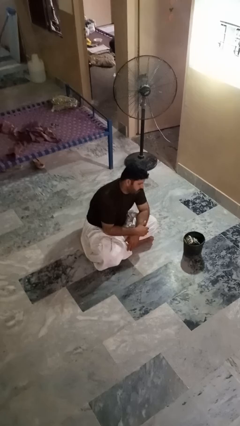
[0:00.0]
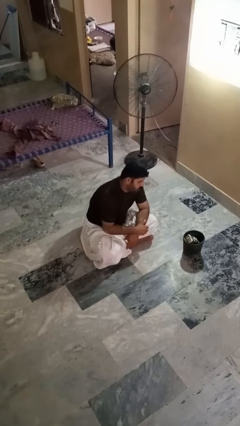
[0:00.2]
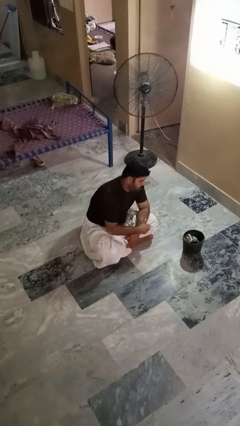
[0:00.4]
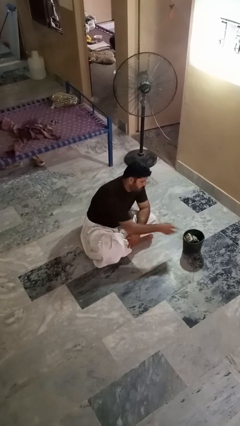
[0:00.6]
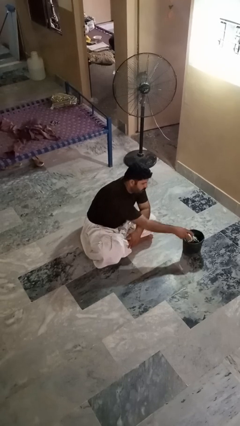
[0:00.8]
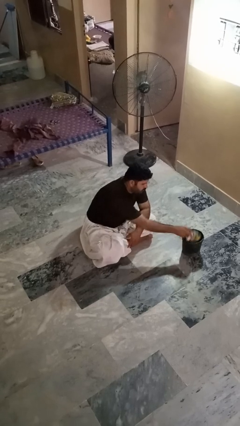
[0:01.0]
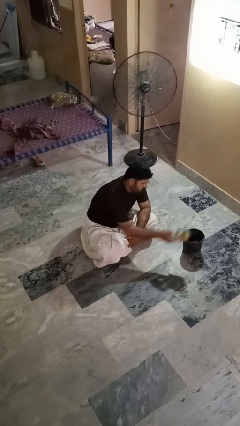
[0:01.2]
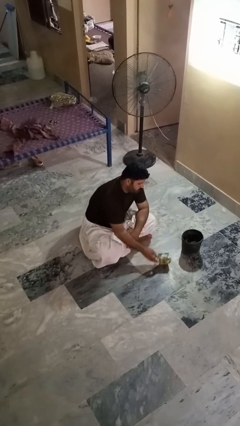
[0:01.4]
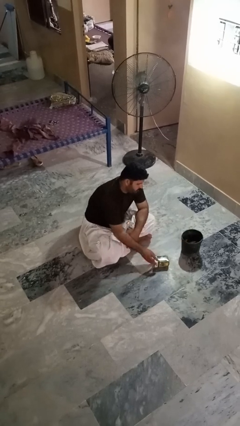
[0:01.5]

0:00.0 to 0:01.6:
person takes object from basket

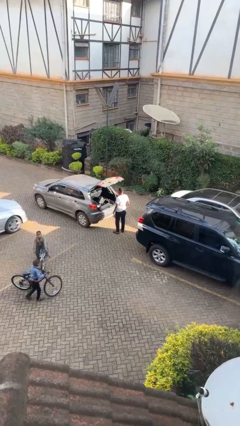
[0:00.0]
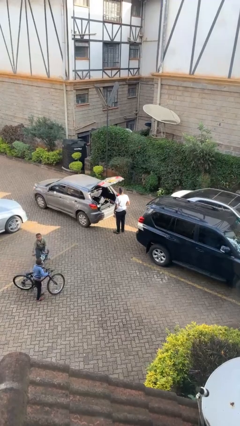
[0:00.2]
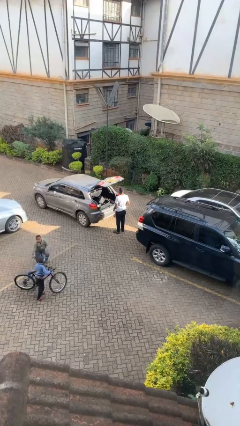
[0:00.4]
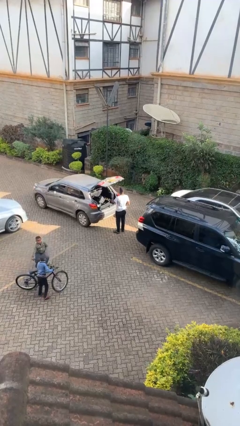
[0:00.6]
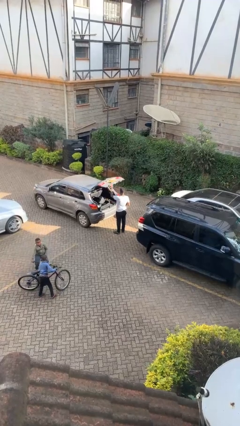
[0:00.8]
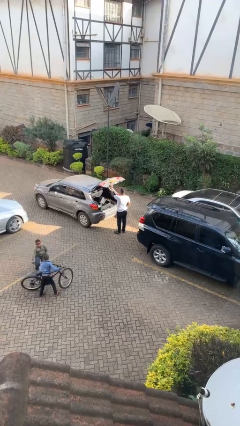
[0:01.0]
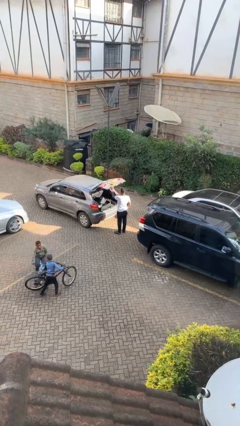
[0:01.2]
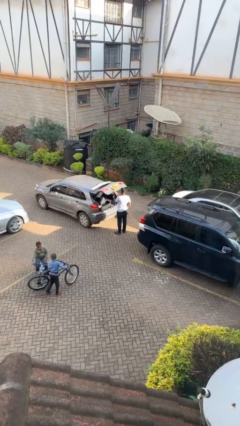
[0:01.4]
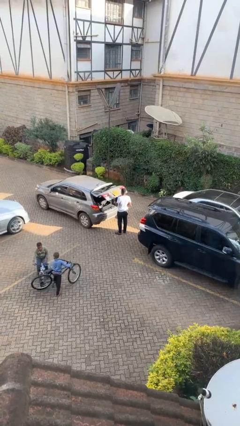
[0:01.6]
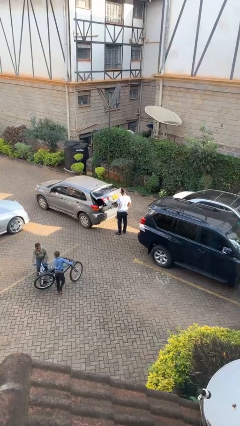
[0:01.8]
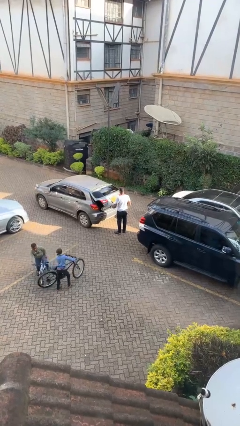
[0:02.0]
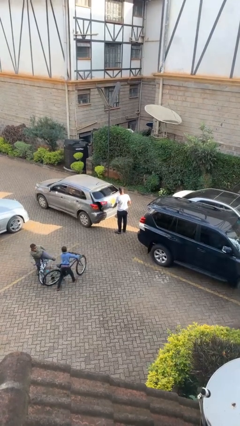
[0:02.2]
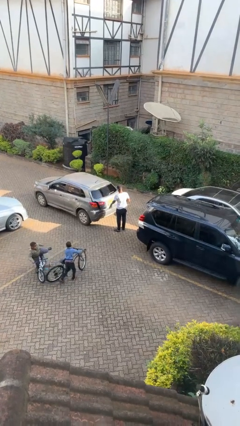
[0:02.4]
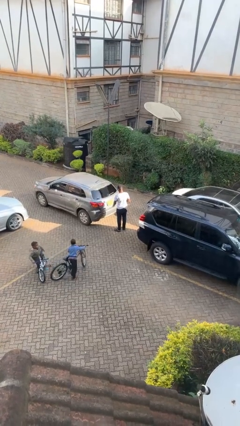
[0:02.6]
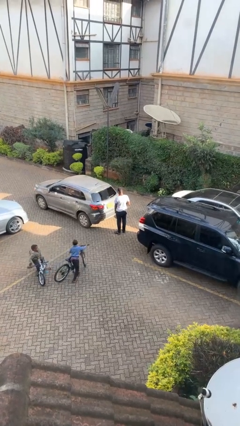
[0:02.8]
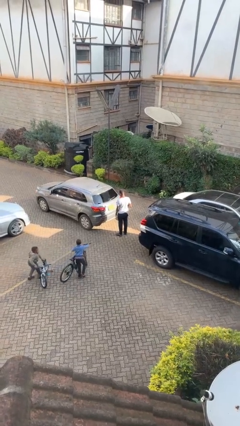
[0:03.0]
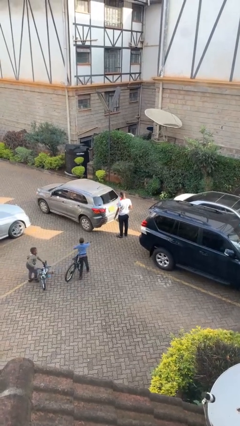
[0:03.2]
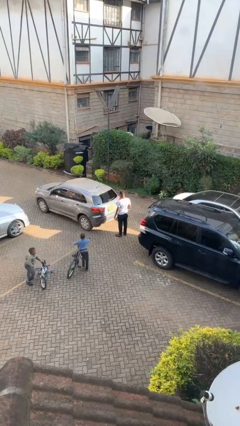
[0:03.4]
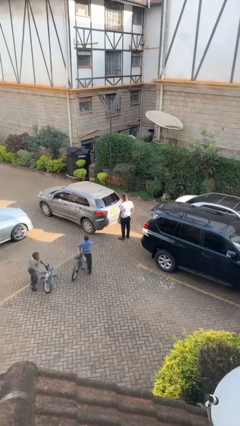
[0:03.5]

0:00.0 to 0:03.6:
person closes car trunk

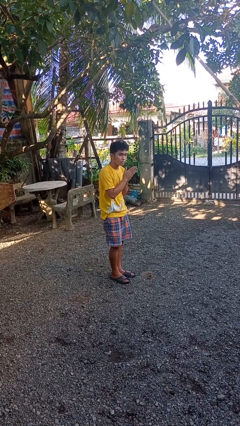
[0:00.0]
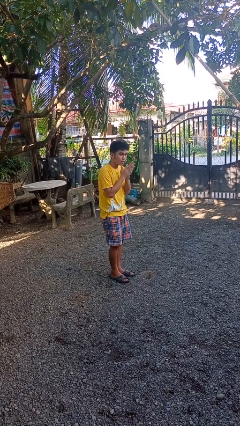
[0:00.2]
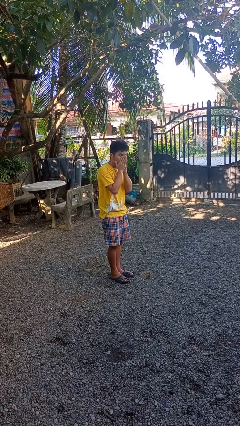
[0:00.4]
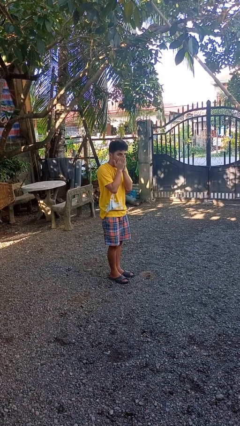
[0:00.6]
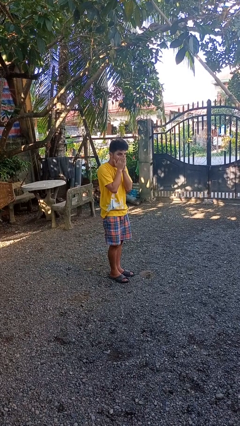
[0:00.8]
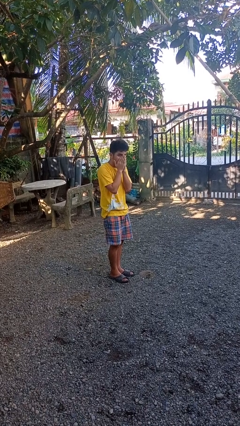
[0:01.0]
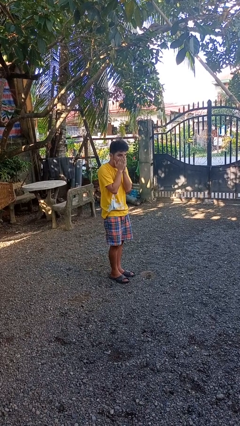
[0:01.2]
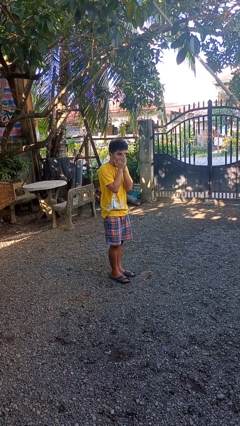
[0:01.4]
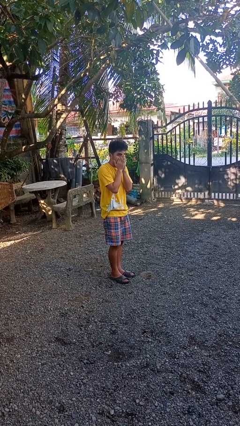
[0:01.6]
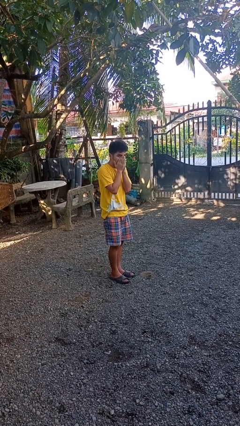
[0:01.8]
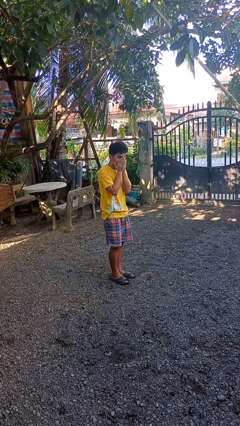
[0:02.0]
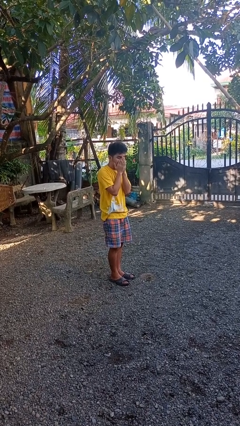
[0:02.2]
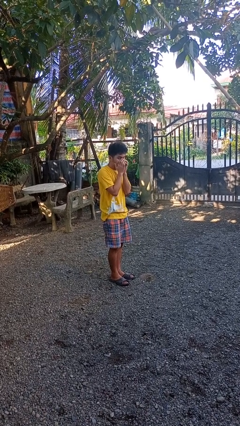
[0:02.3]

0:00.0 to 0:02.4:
person blows into hands

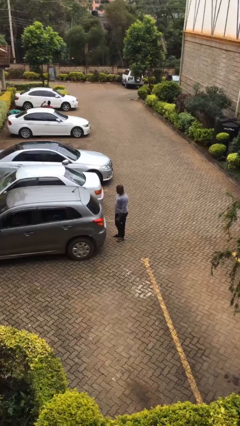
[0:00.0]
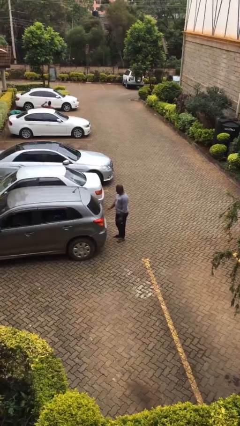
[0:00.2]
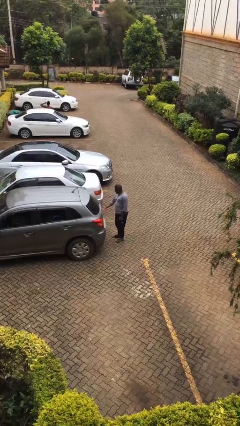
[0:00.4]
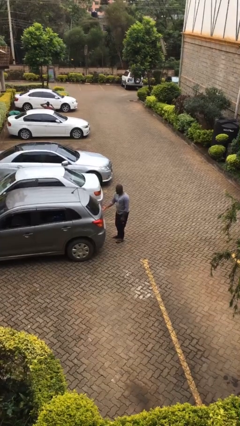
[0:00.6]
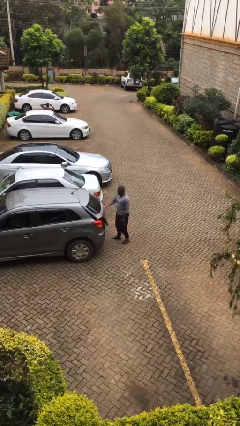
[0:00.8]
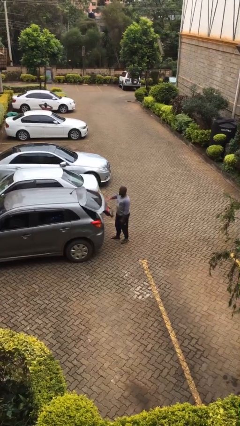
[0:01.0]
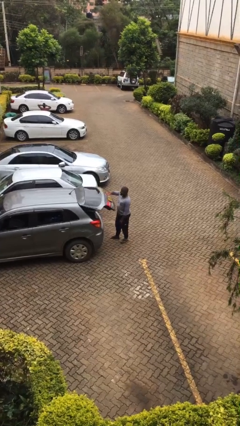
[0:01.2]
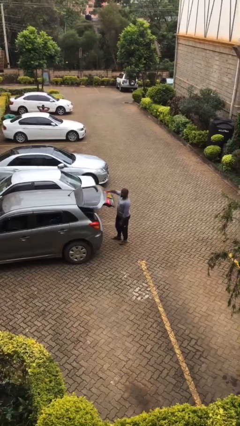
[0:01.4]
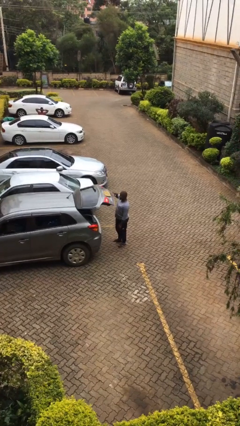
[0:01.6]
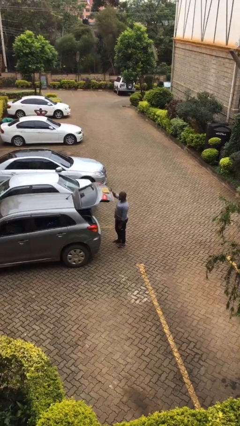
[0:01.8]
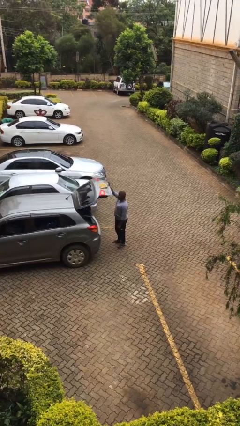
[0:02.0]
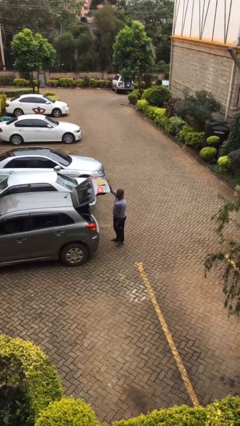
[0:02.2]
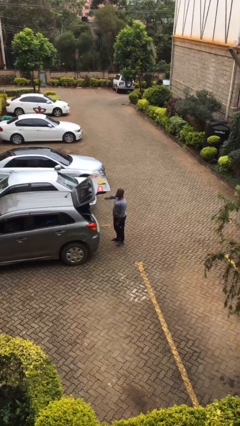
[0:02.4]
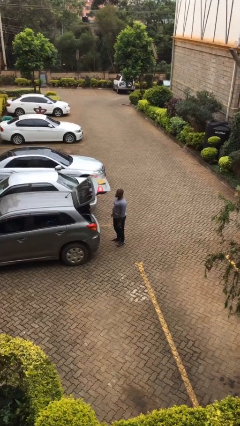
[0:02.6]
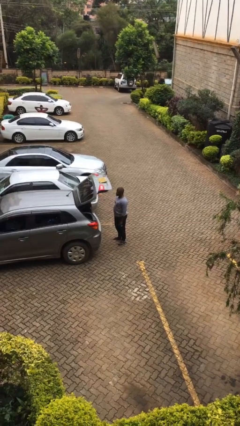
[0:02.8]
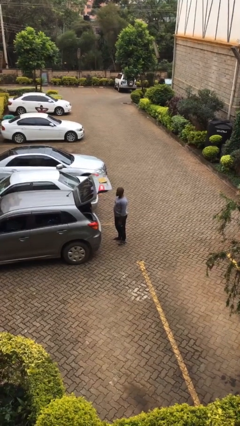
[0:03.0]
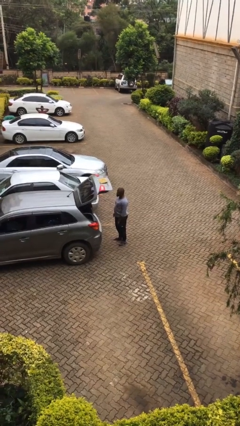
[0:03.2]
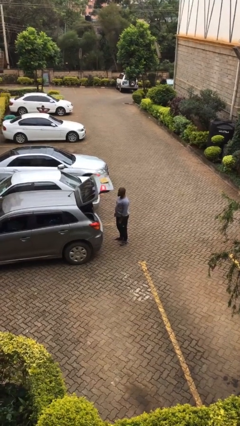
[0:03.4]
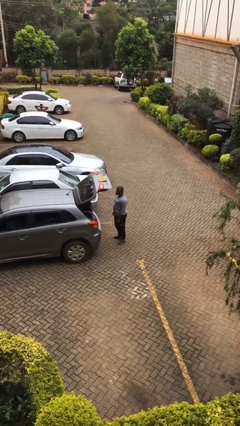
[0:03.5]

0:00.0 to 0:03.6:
person opens car trunk

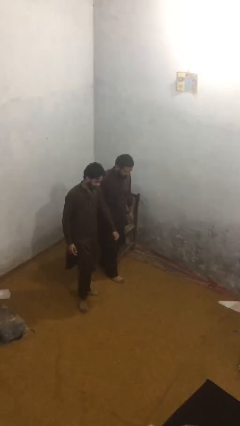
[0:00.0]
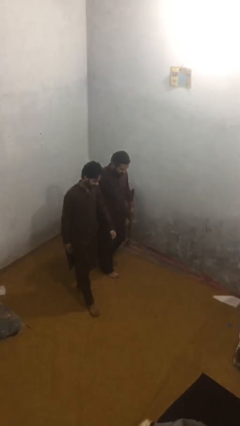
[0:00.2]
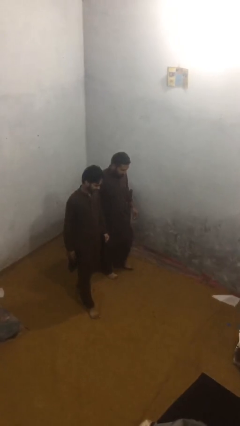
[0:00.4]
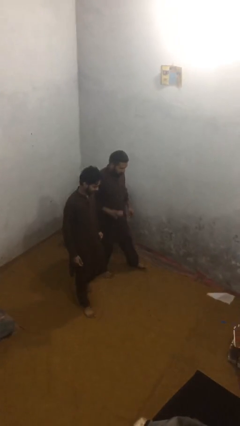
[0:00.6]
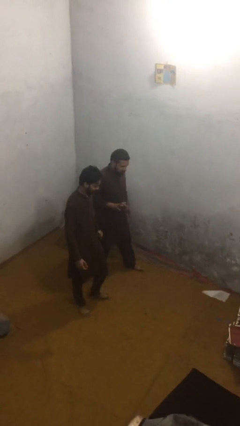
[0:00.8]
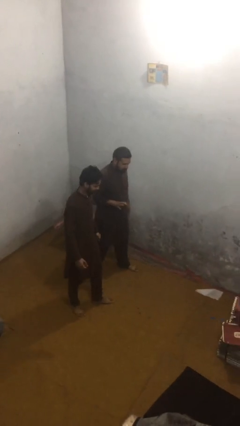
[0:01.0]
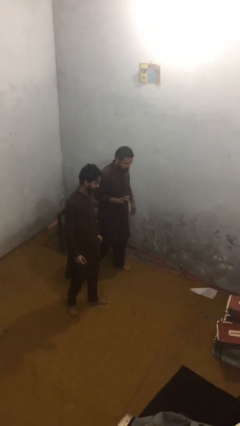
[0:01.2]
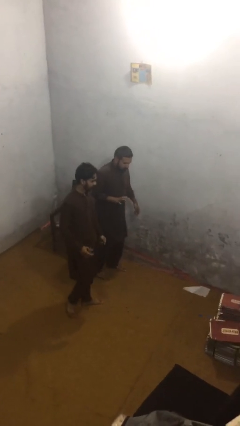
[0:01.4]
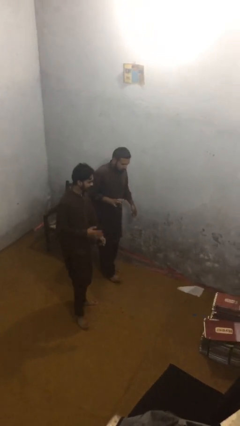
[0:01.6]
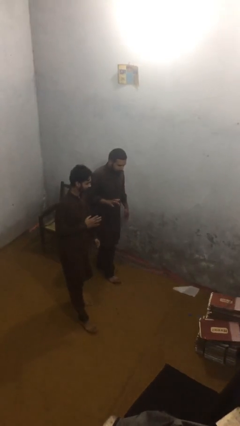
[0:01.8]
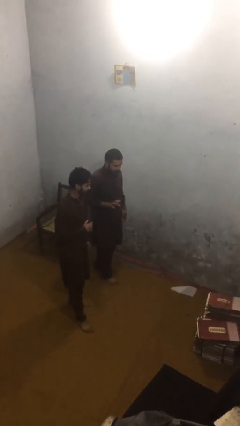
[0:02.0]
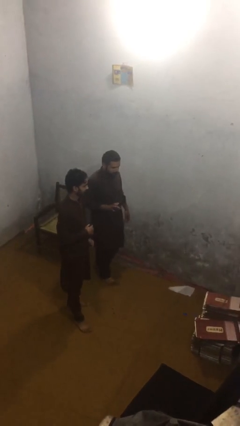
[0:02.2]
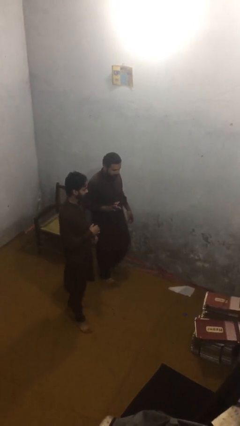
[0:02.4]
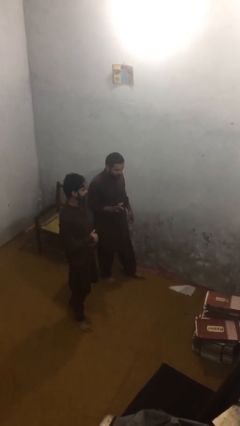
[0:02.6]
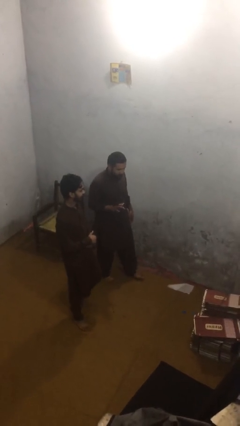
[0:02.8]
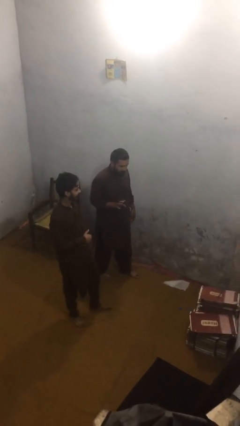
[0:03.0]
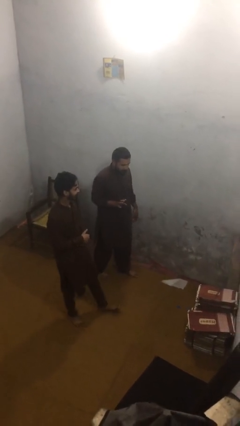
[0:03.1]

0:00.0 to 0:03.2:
person talks to person

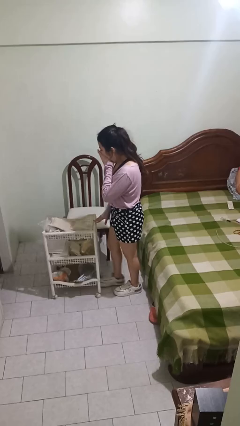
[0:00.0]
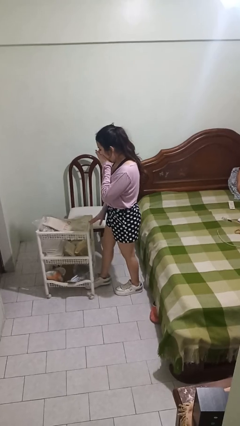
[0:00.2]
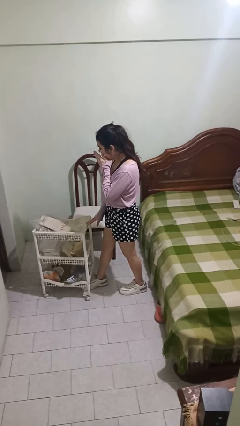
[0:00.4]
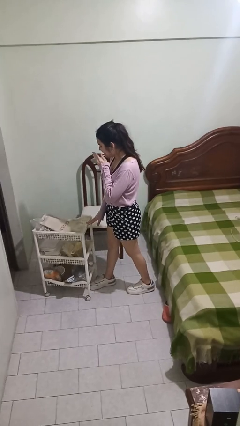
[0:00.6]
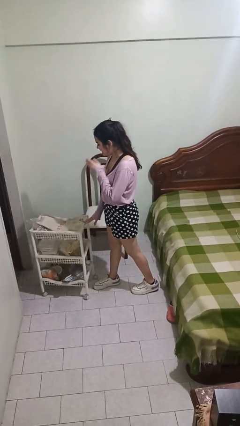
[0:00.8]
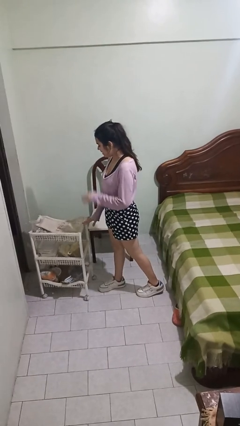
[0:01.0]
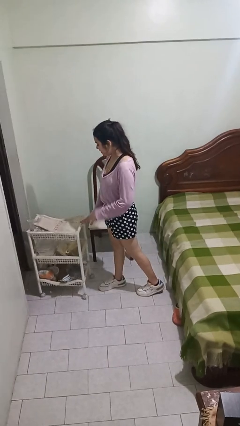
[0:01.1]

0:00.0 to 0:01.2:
person pushes wheeled cart

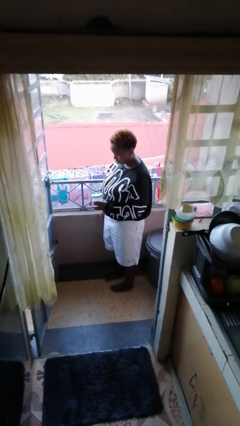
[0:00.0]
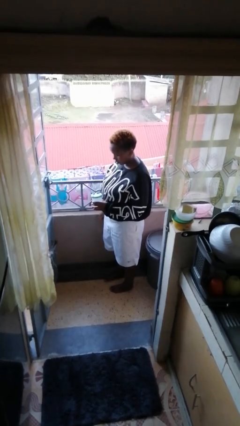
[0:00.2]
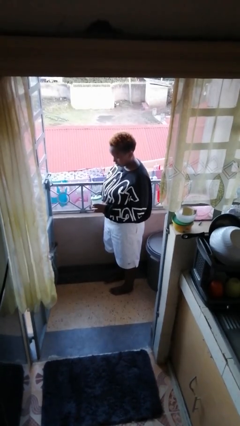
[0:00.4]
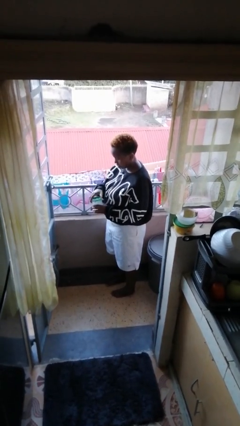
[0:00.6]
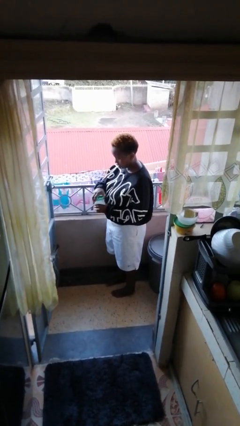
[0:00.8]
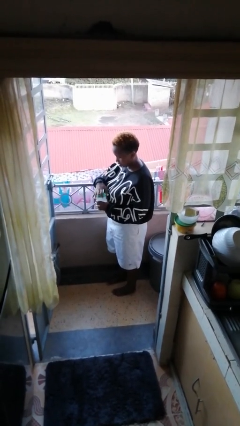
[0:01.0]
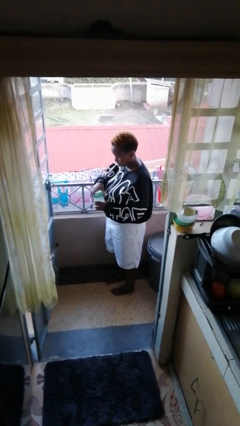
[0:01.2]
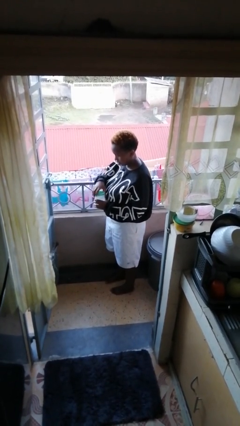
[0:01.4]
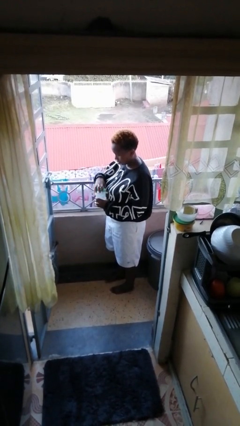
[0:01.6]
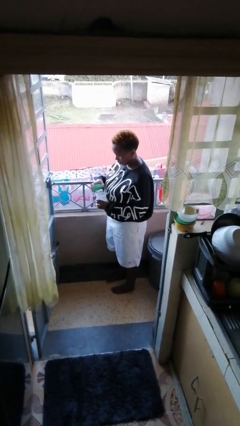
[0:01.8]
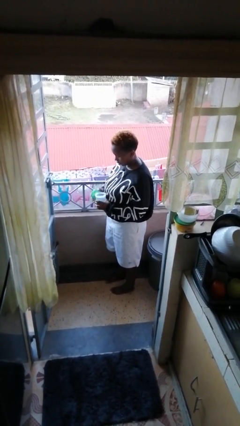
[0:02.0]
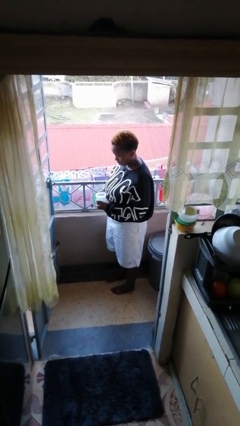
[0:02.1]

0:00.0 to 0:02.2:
person opens jar
